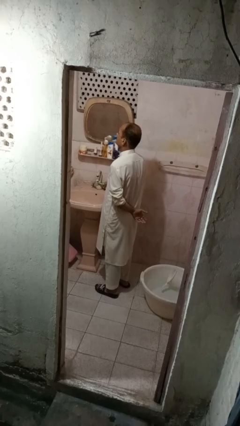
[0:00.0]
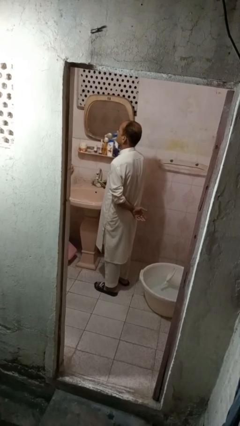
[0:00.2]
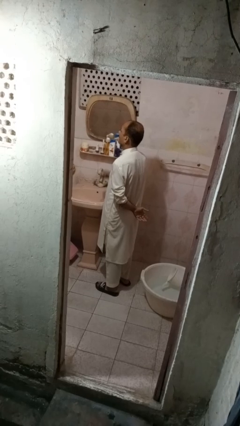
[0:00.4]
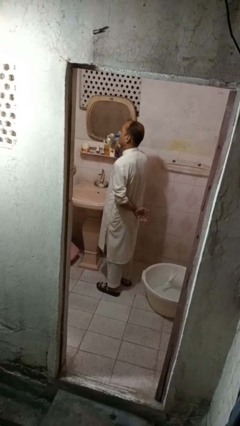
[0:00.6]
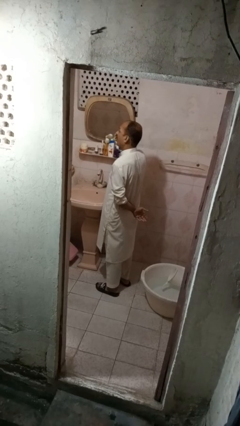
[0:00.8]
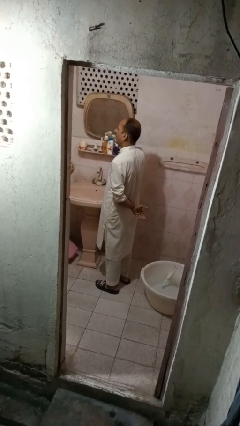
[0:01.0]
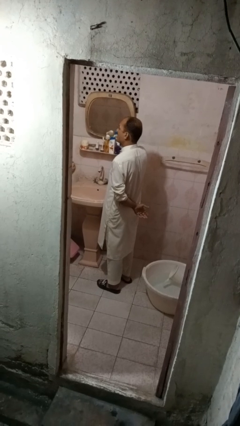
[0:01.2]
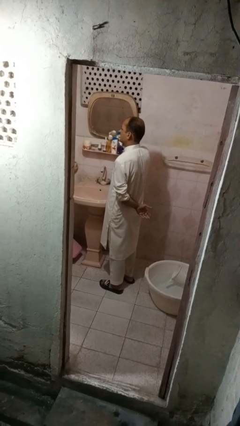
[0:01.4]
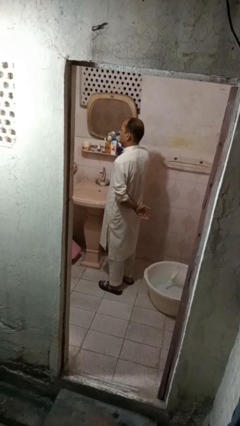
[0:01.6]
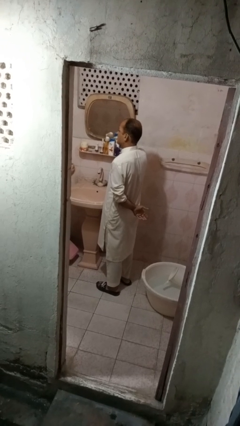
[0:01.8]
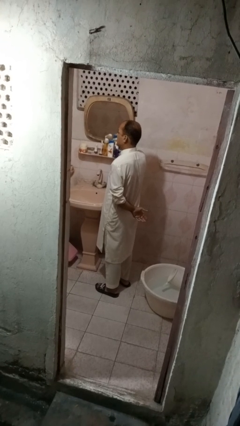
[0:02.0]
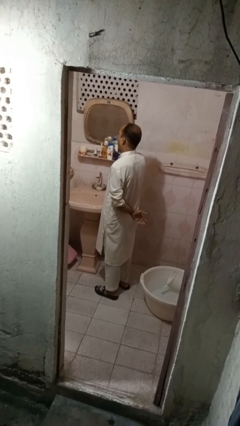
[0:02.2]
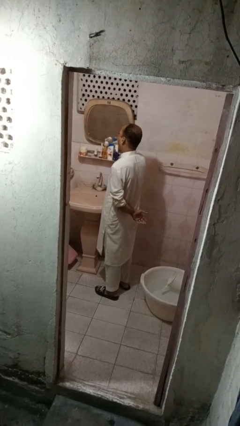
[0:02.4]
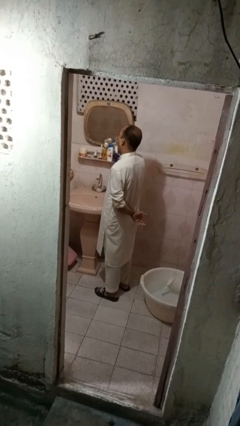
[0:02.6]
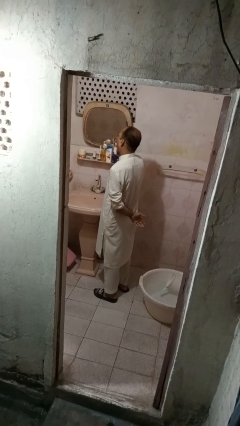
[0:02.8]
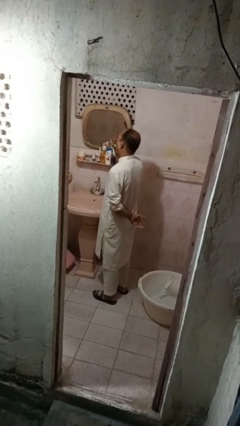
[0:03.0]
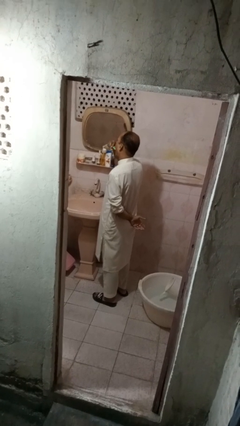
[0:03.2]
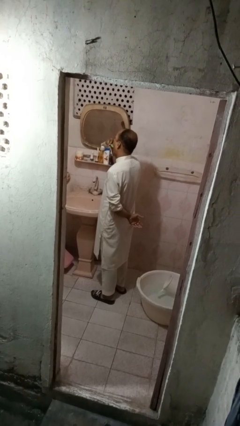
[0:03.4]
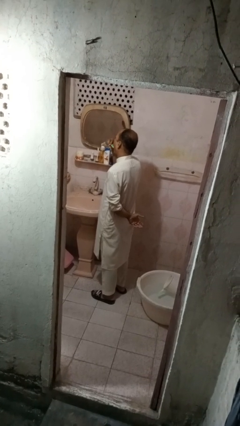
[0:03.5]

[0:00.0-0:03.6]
person brushes teeth

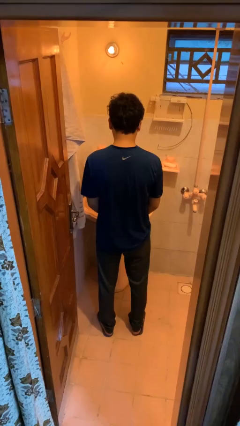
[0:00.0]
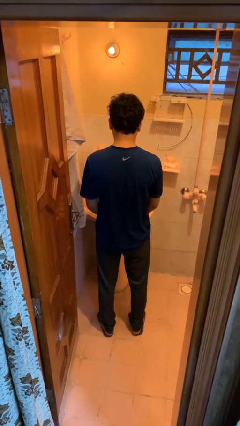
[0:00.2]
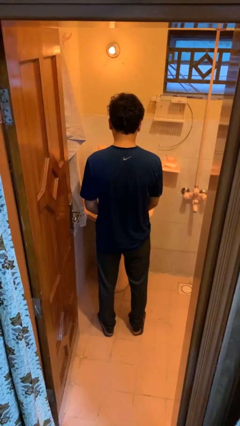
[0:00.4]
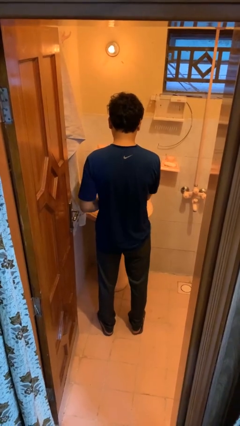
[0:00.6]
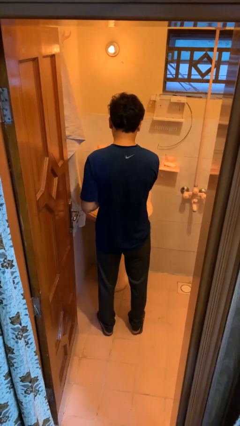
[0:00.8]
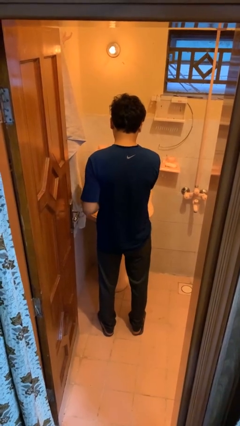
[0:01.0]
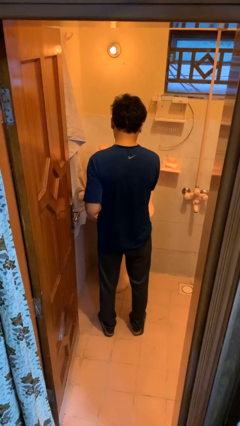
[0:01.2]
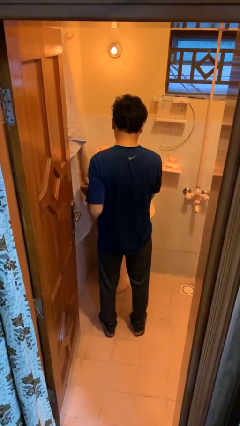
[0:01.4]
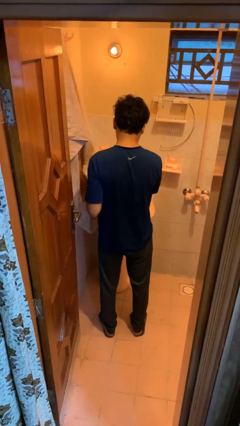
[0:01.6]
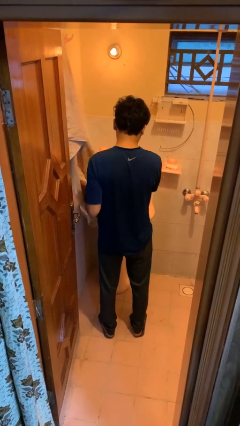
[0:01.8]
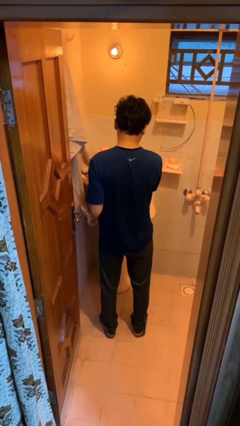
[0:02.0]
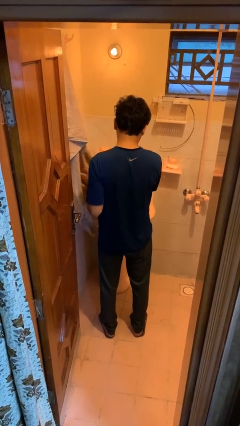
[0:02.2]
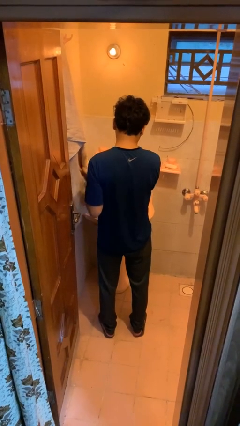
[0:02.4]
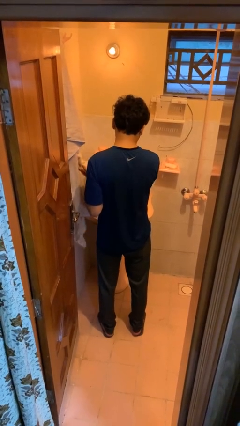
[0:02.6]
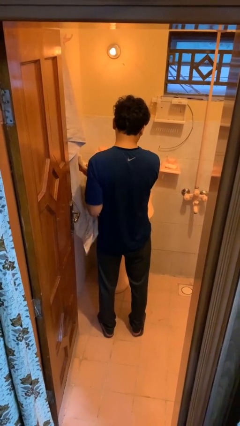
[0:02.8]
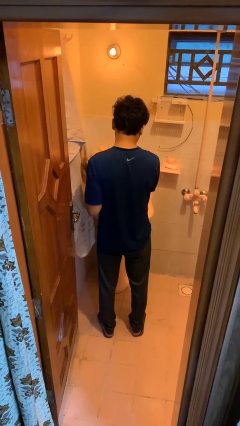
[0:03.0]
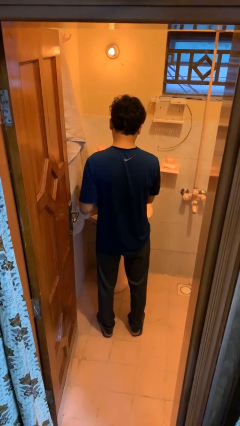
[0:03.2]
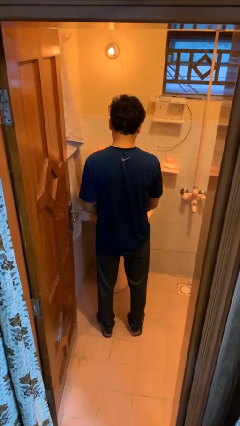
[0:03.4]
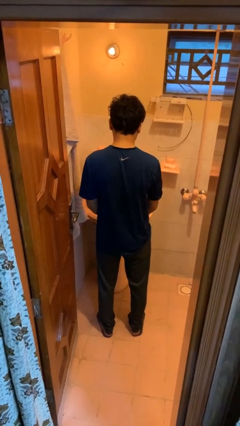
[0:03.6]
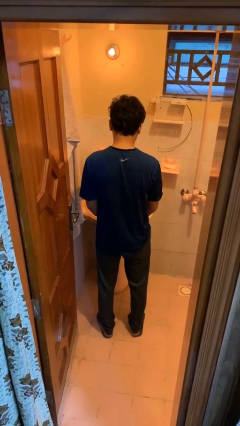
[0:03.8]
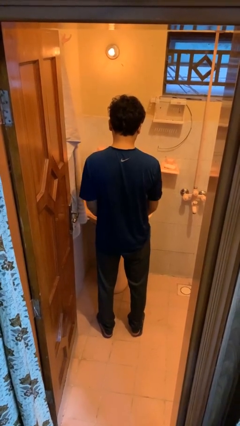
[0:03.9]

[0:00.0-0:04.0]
person dries hands with towel

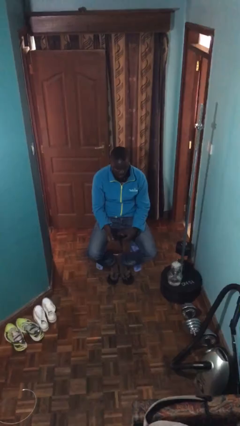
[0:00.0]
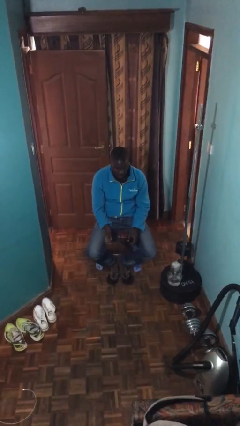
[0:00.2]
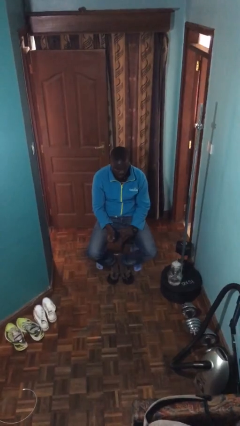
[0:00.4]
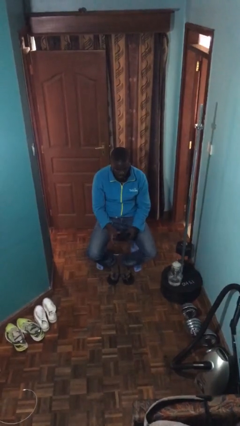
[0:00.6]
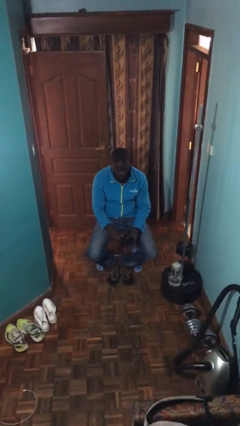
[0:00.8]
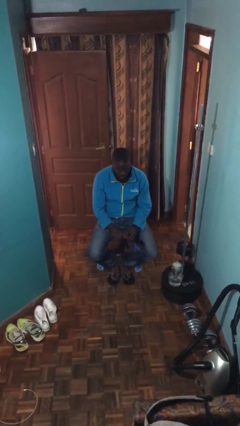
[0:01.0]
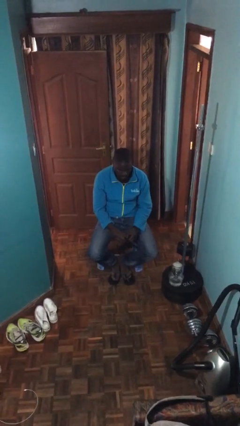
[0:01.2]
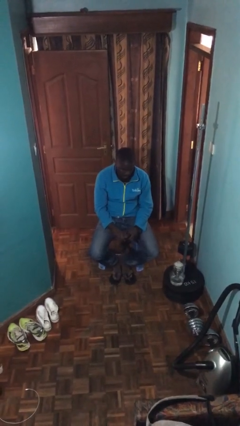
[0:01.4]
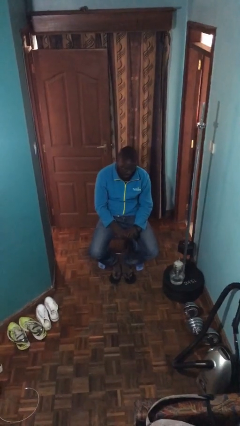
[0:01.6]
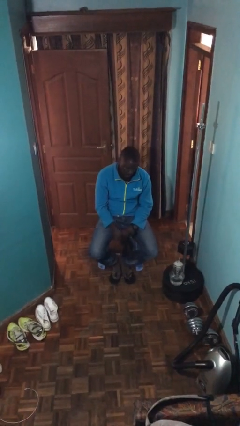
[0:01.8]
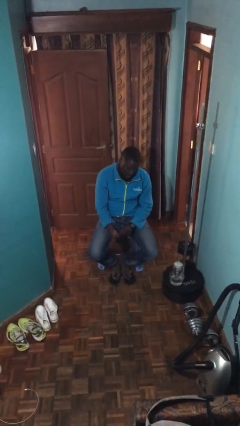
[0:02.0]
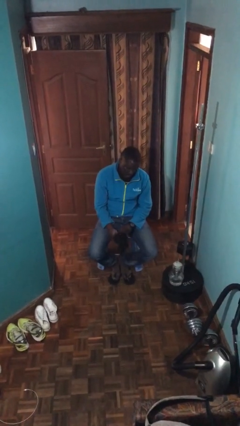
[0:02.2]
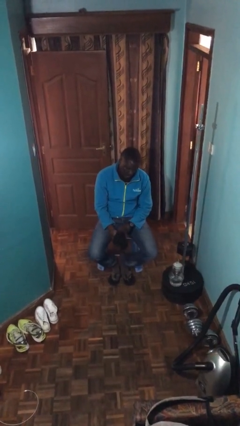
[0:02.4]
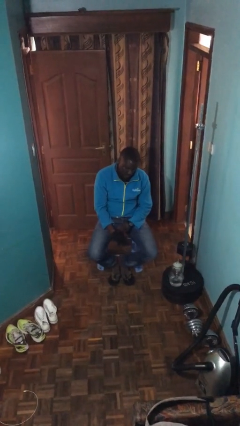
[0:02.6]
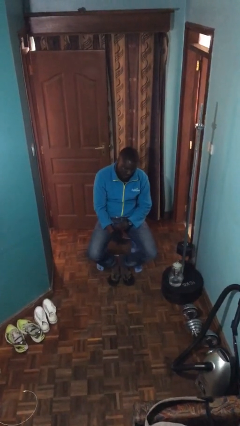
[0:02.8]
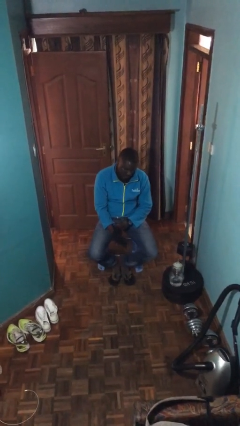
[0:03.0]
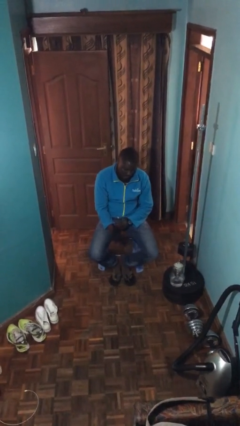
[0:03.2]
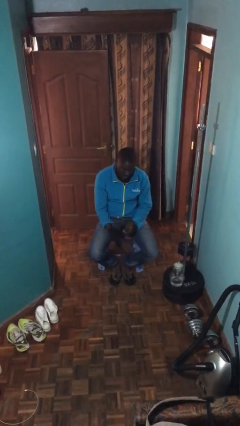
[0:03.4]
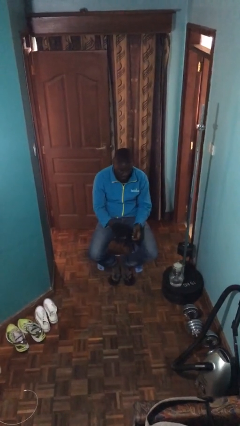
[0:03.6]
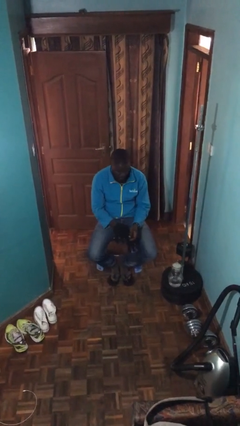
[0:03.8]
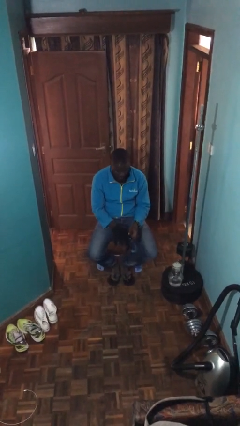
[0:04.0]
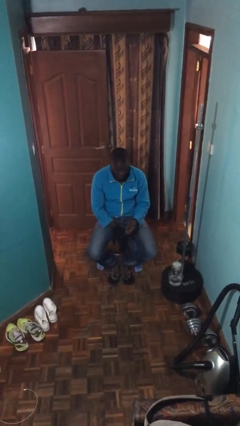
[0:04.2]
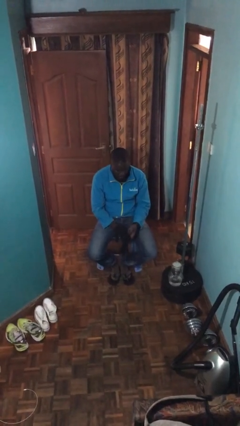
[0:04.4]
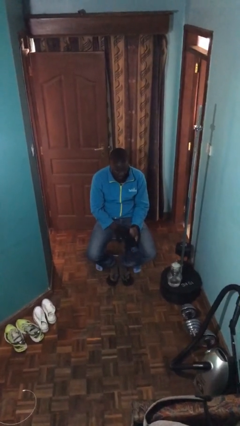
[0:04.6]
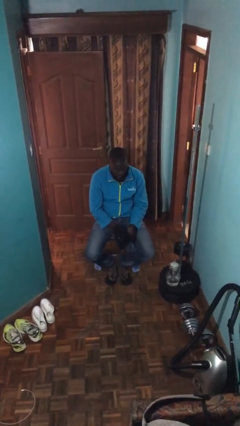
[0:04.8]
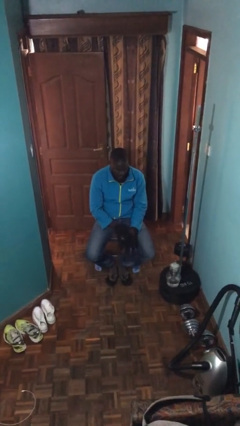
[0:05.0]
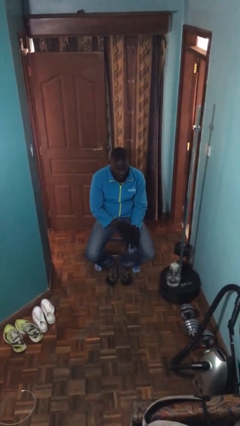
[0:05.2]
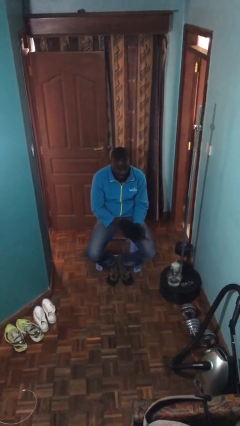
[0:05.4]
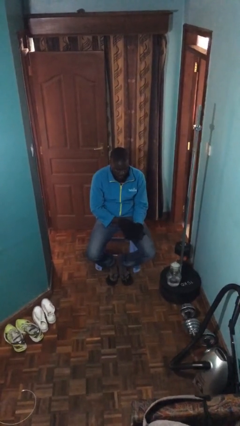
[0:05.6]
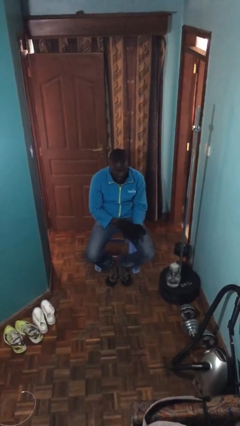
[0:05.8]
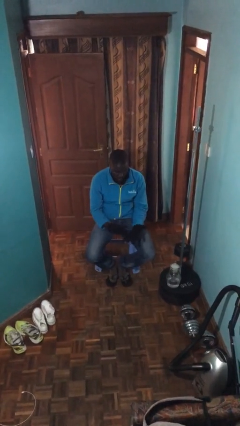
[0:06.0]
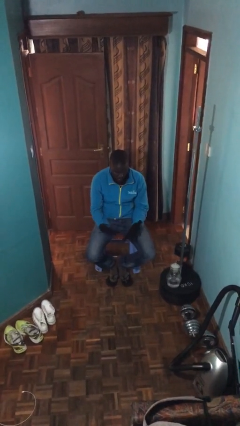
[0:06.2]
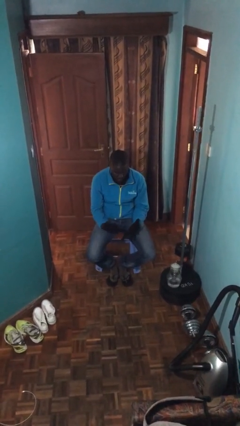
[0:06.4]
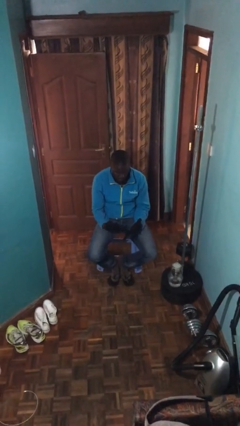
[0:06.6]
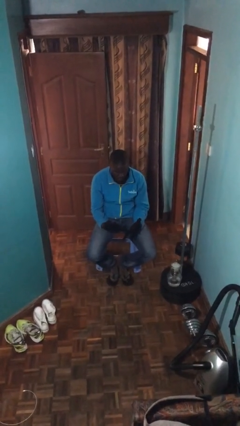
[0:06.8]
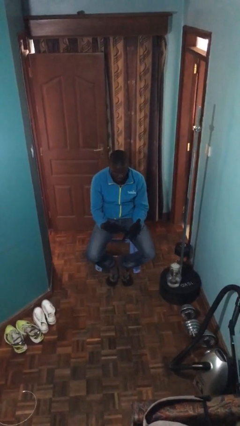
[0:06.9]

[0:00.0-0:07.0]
person puts on gloves

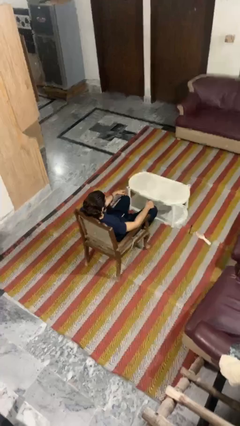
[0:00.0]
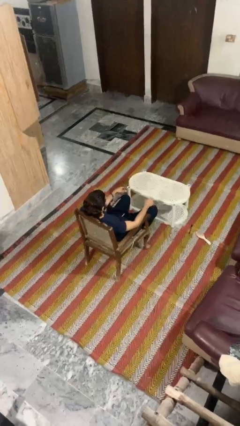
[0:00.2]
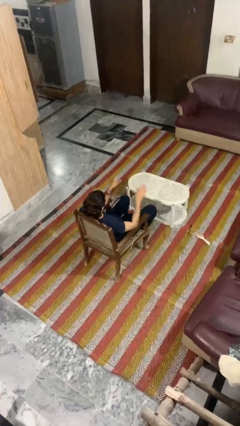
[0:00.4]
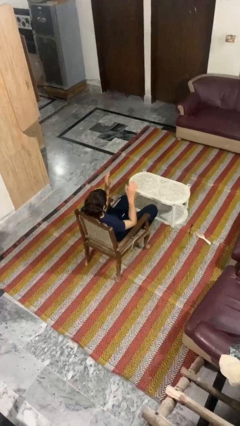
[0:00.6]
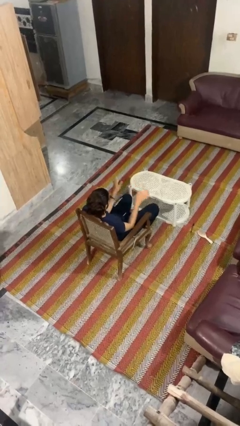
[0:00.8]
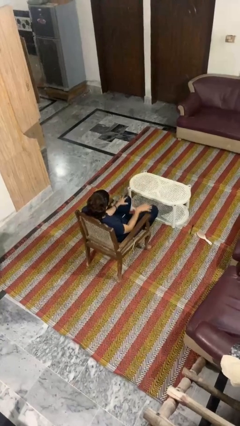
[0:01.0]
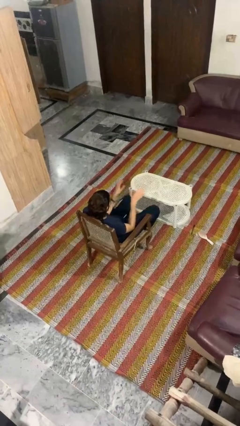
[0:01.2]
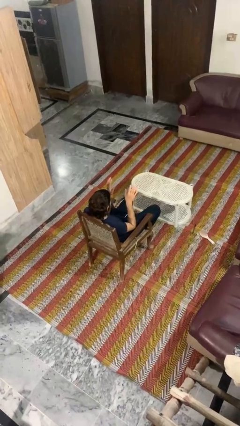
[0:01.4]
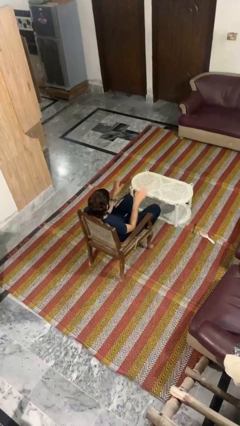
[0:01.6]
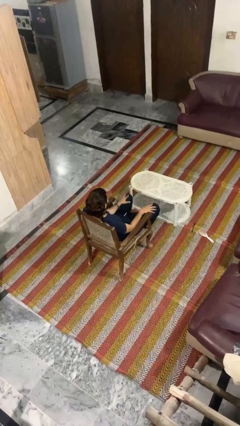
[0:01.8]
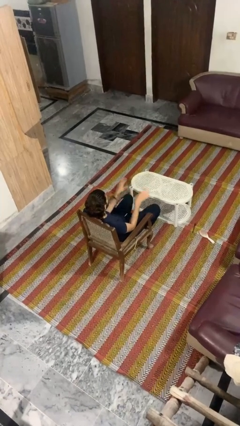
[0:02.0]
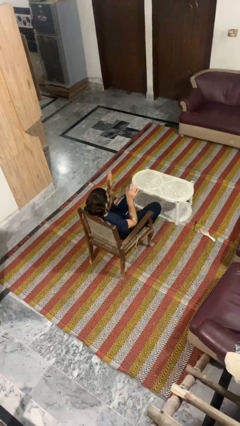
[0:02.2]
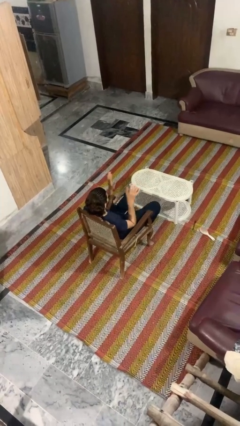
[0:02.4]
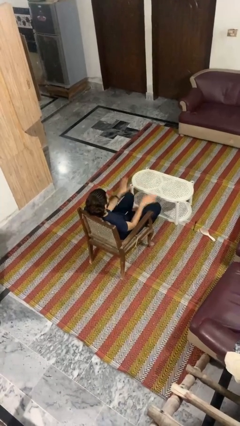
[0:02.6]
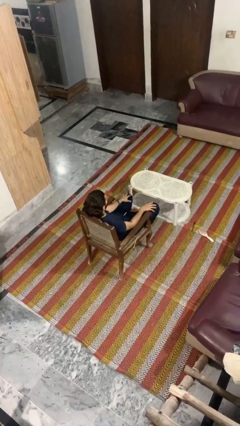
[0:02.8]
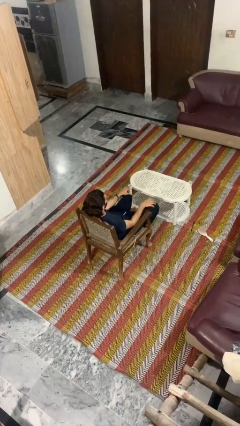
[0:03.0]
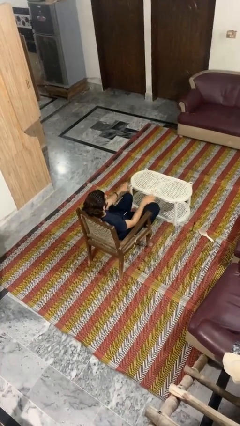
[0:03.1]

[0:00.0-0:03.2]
person slaps hands on thighs
